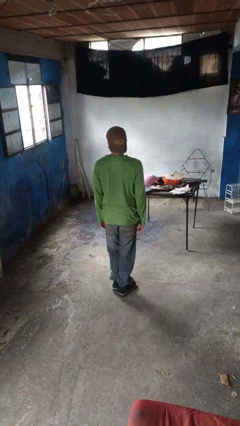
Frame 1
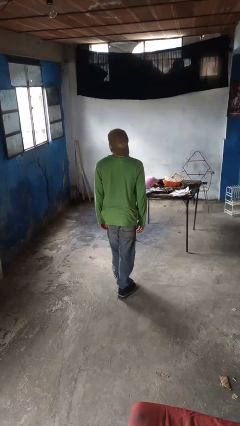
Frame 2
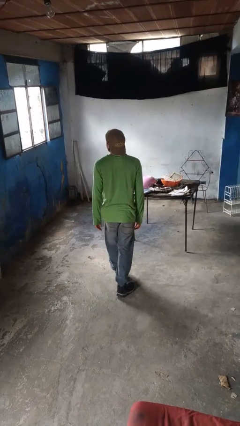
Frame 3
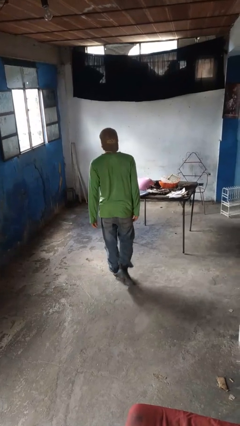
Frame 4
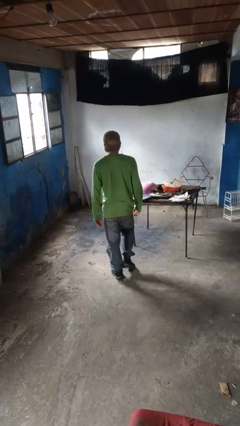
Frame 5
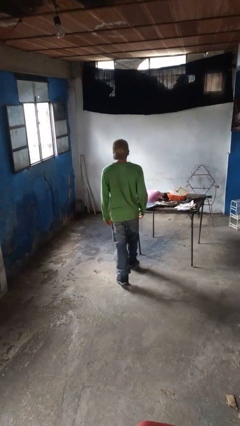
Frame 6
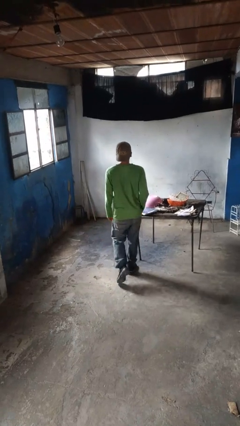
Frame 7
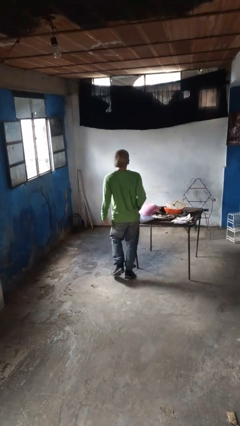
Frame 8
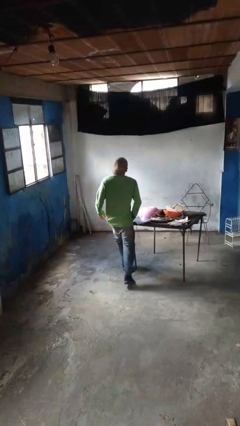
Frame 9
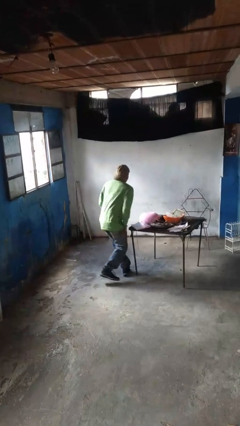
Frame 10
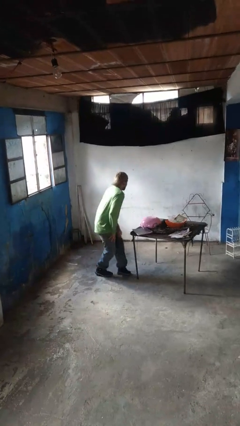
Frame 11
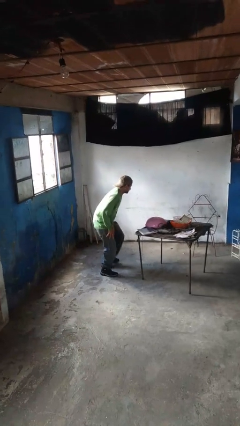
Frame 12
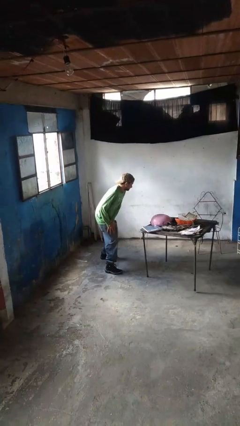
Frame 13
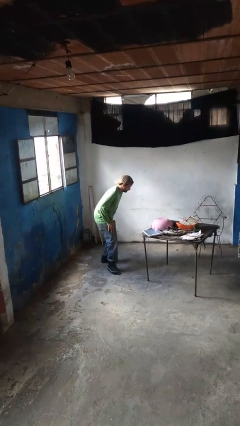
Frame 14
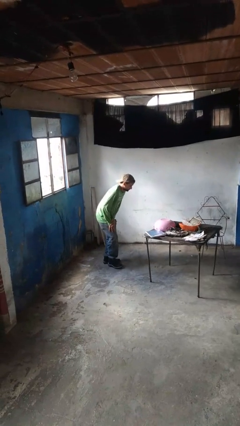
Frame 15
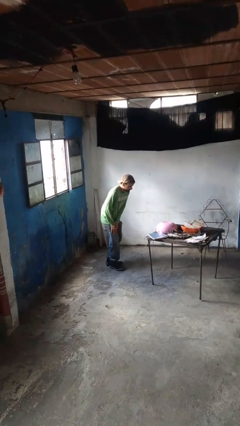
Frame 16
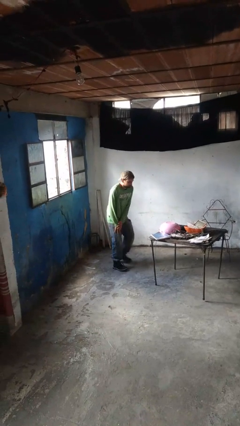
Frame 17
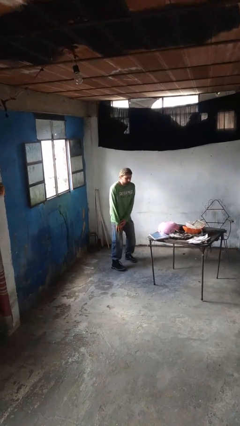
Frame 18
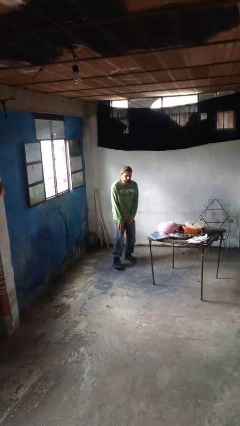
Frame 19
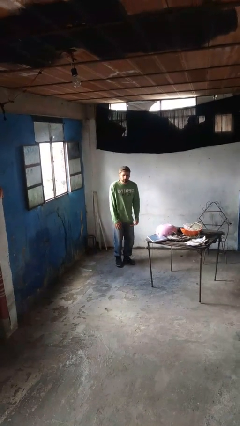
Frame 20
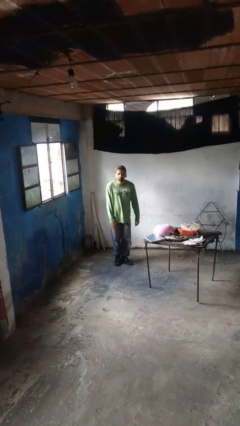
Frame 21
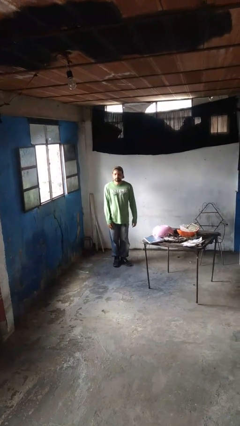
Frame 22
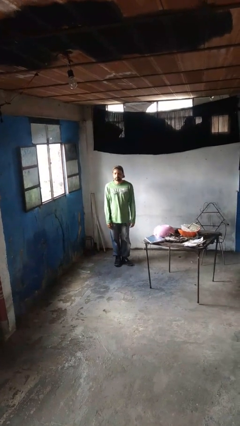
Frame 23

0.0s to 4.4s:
person bumps into table

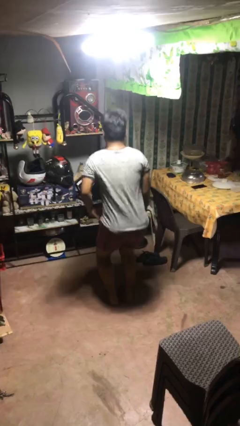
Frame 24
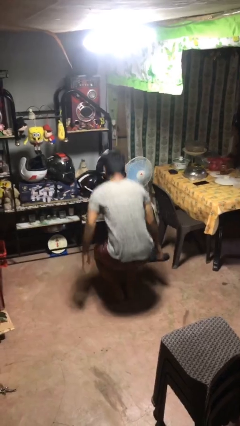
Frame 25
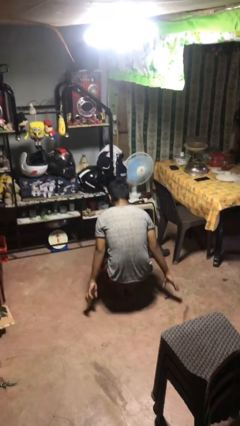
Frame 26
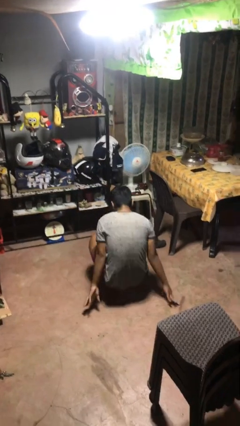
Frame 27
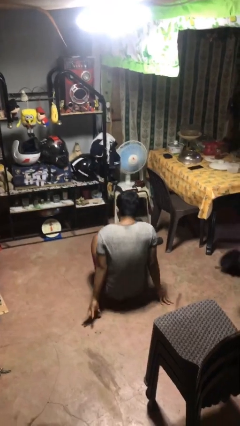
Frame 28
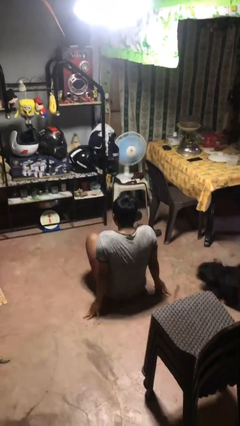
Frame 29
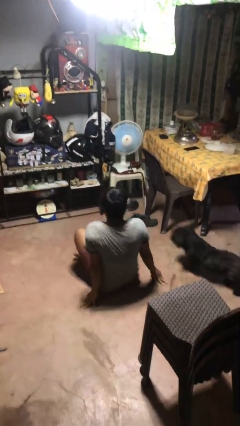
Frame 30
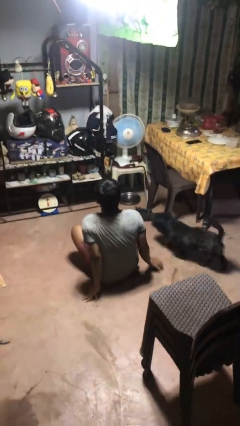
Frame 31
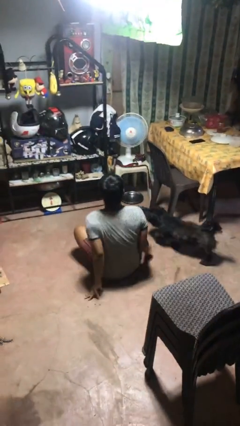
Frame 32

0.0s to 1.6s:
person sits crisscross

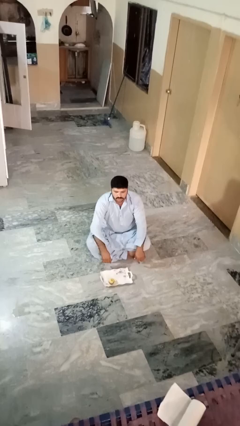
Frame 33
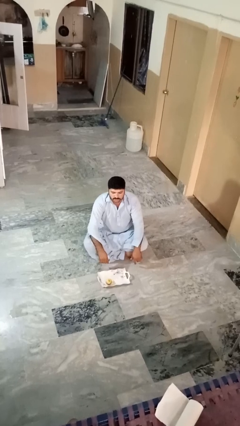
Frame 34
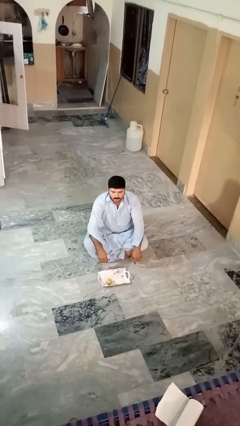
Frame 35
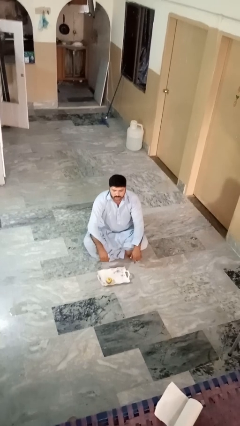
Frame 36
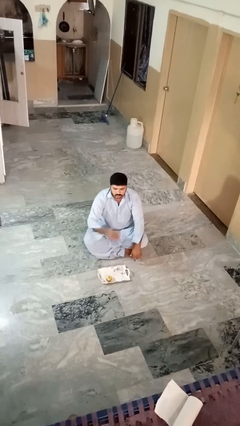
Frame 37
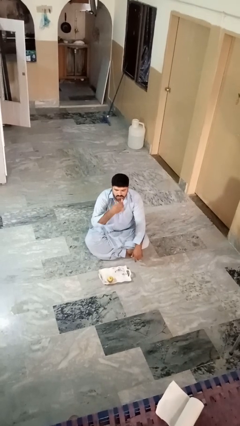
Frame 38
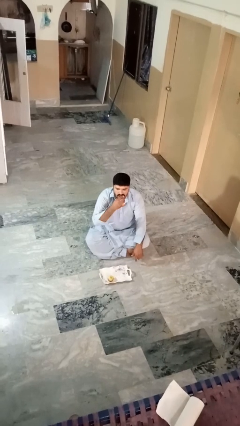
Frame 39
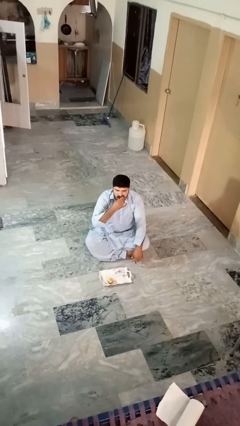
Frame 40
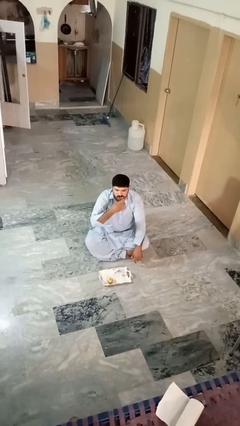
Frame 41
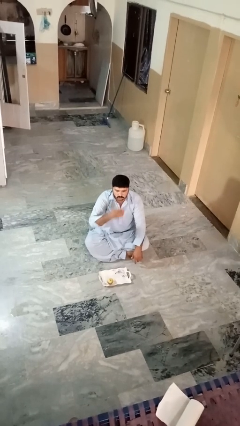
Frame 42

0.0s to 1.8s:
person eats apple

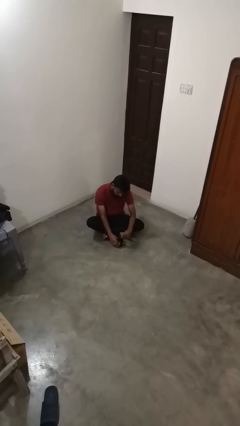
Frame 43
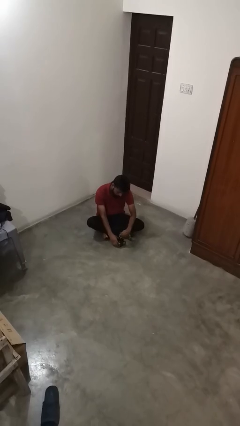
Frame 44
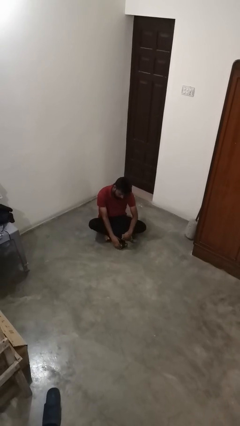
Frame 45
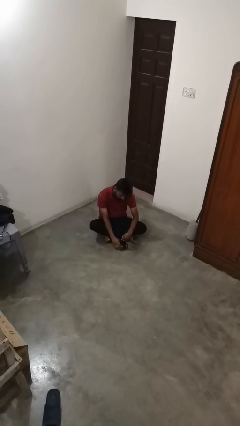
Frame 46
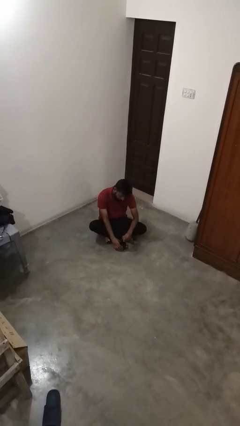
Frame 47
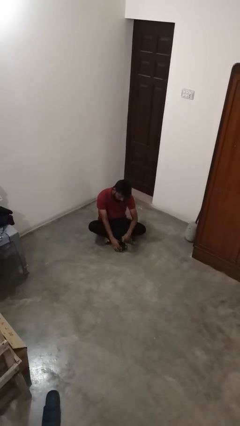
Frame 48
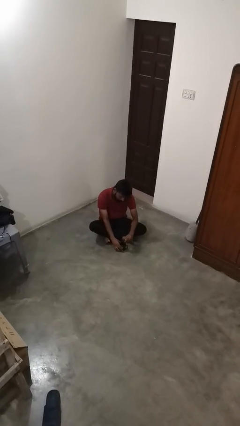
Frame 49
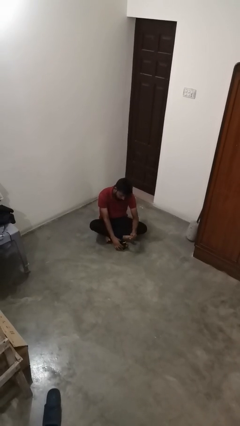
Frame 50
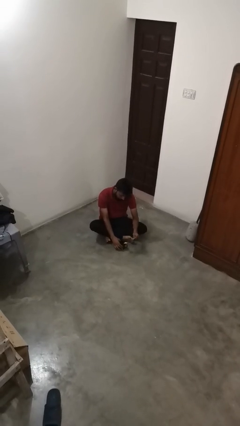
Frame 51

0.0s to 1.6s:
person stirs mug

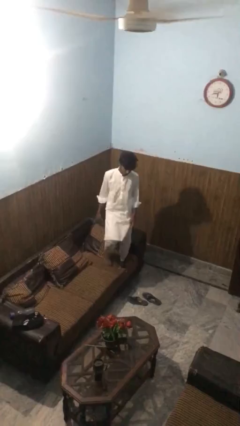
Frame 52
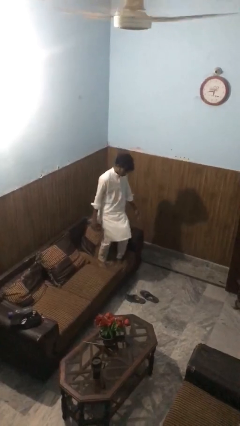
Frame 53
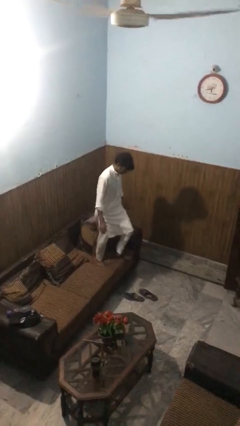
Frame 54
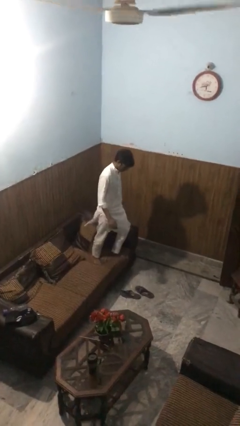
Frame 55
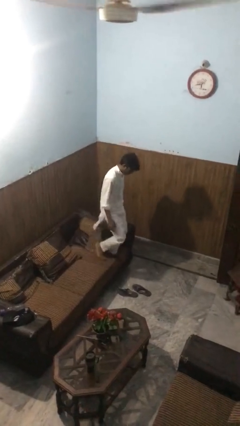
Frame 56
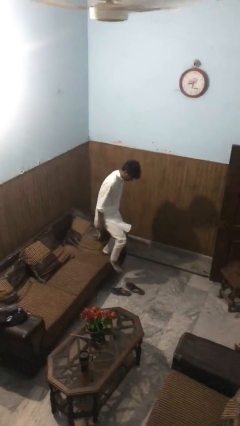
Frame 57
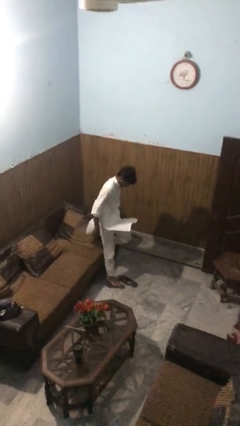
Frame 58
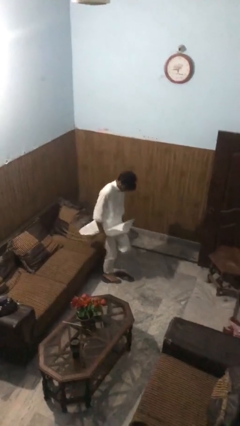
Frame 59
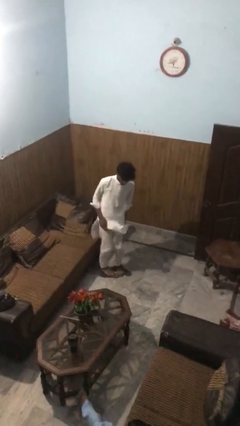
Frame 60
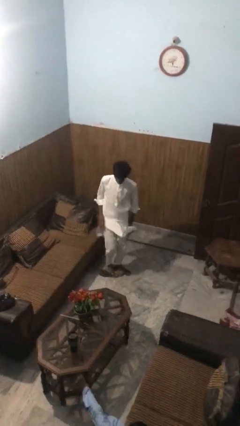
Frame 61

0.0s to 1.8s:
person climbs off couch

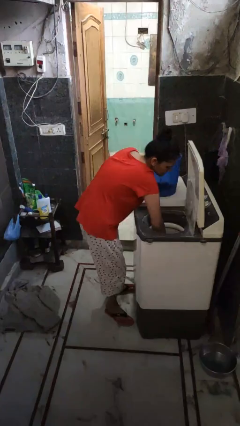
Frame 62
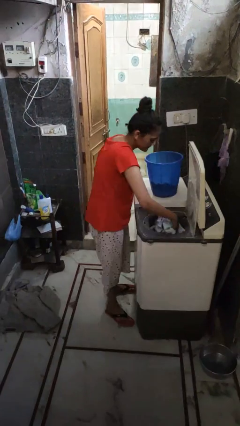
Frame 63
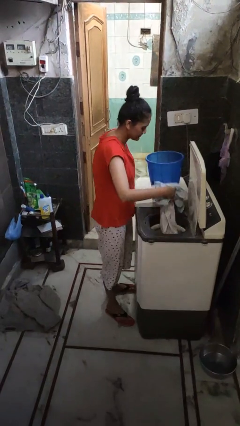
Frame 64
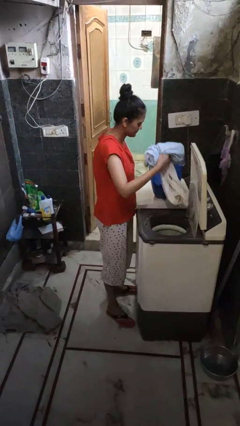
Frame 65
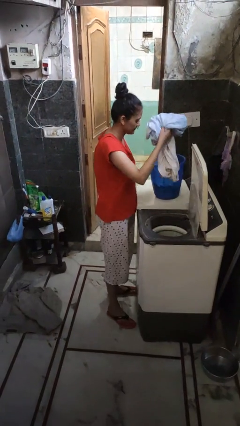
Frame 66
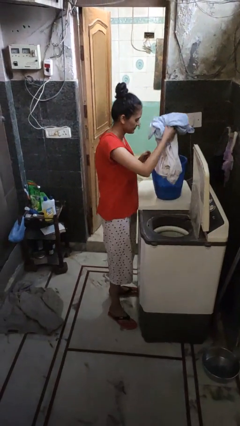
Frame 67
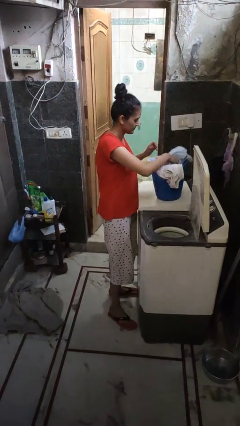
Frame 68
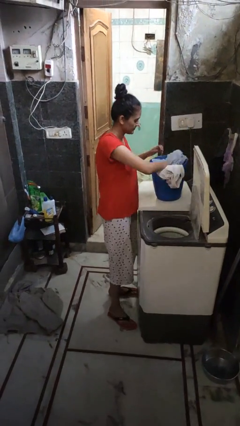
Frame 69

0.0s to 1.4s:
person unloads clotheswasher

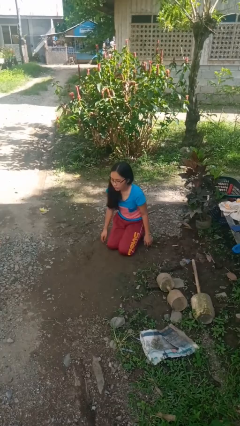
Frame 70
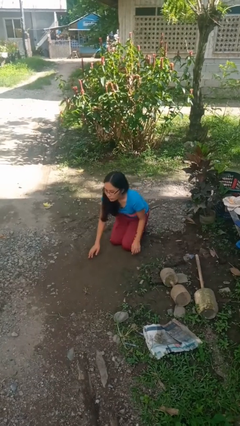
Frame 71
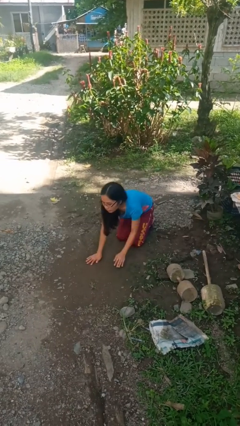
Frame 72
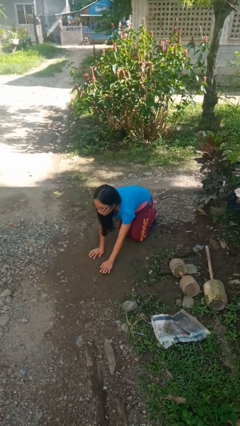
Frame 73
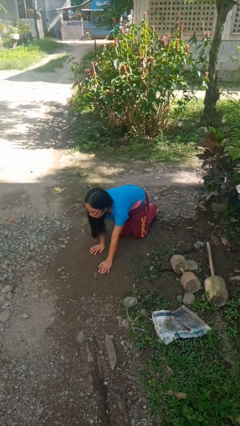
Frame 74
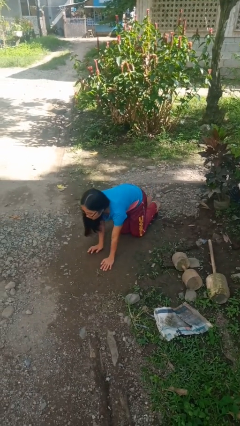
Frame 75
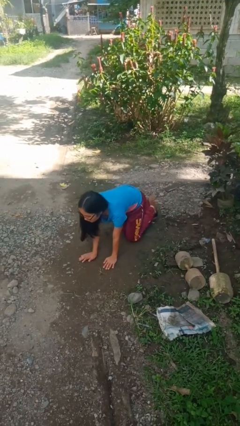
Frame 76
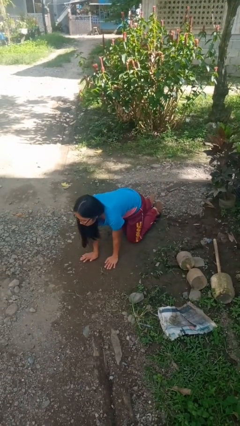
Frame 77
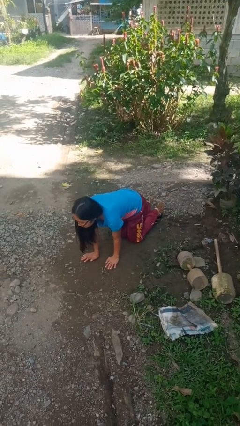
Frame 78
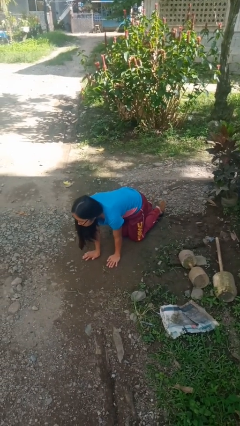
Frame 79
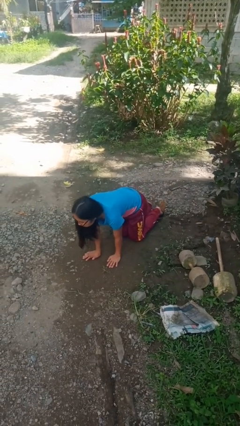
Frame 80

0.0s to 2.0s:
person crawls

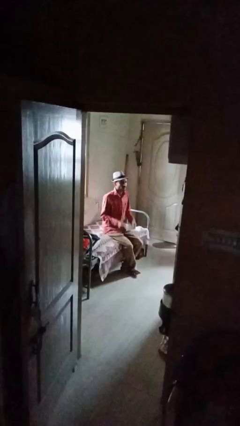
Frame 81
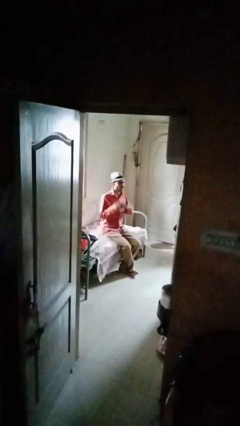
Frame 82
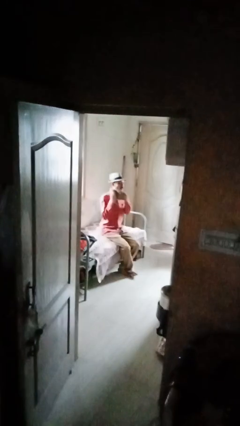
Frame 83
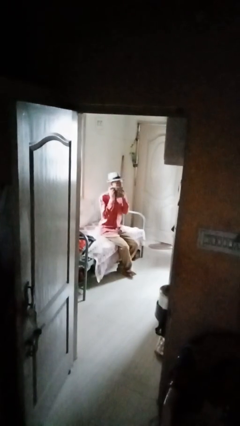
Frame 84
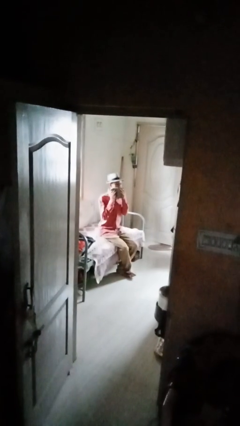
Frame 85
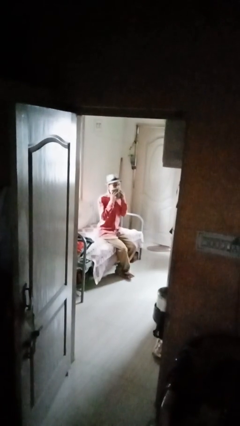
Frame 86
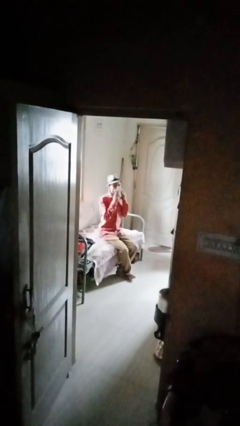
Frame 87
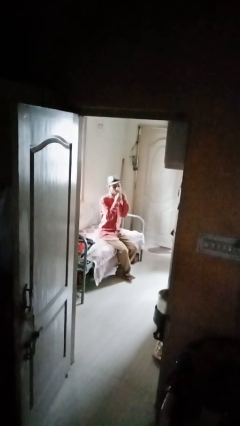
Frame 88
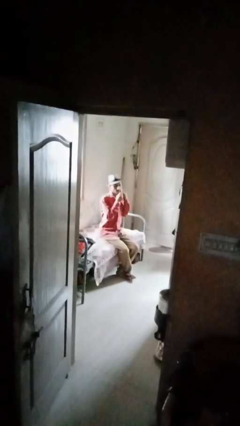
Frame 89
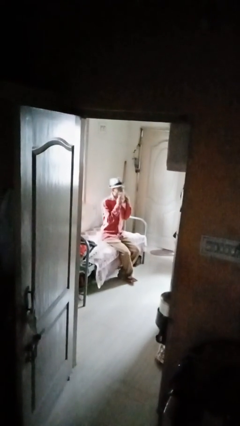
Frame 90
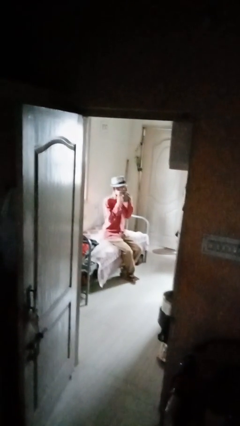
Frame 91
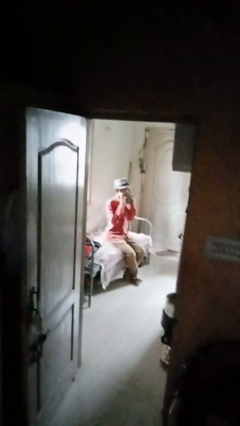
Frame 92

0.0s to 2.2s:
person wipes mouth with napkin
